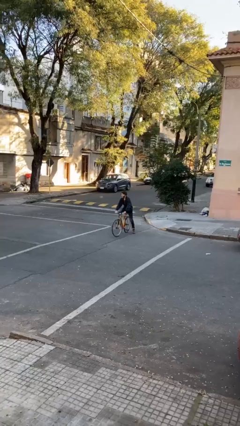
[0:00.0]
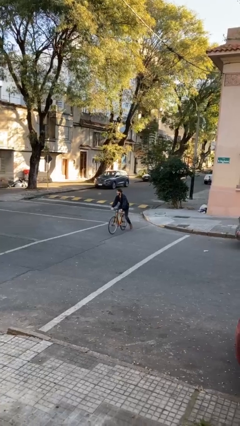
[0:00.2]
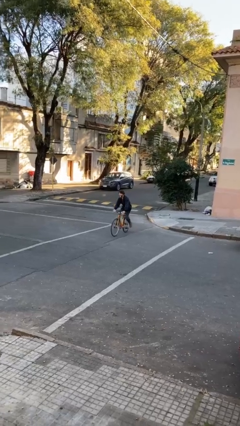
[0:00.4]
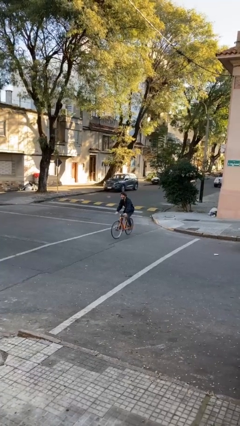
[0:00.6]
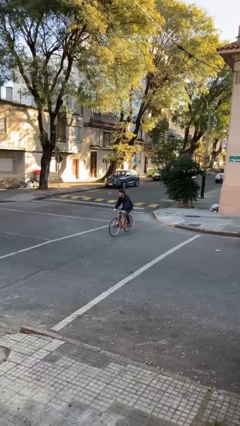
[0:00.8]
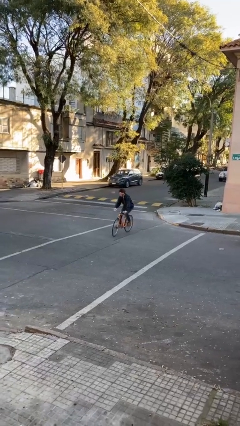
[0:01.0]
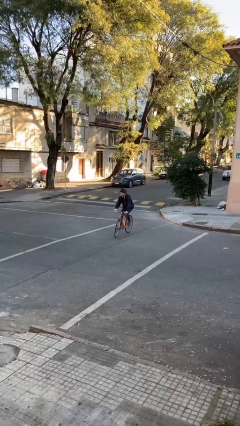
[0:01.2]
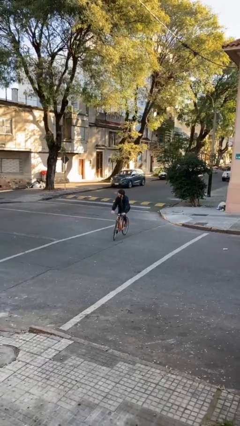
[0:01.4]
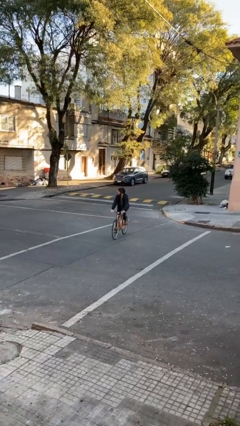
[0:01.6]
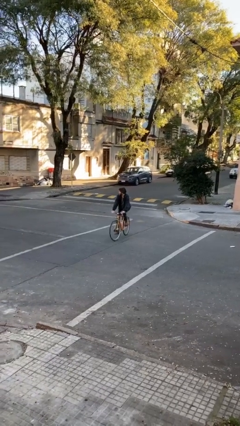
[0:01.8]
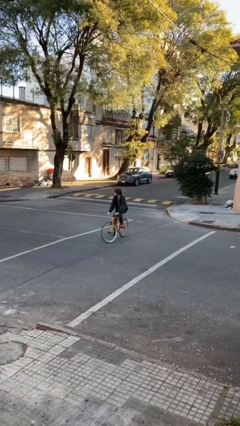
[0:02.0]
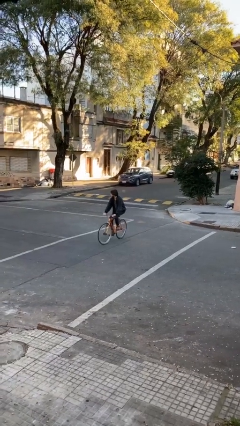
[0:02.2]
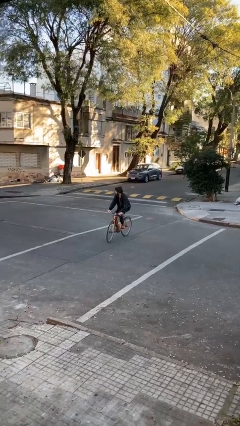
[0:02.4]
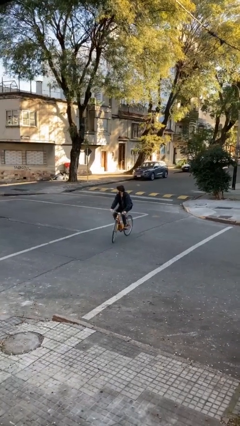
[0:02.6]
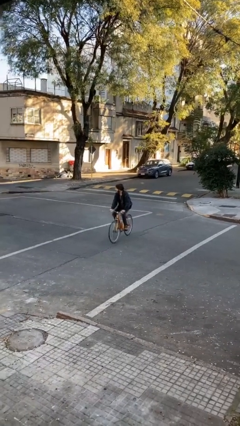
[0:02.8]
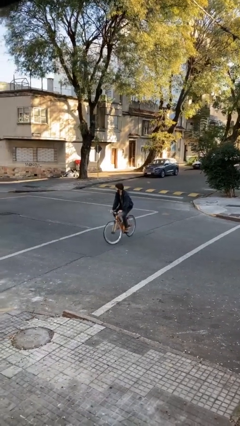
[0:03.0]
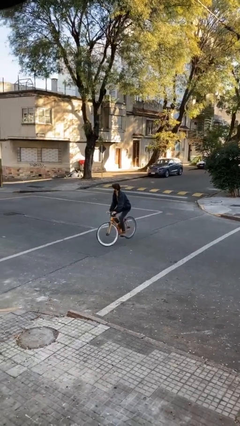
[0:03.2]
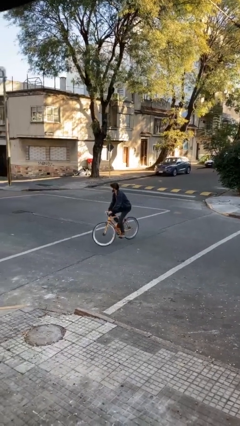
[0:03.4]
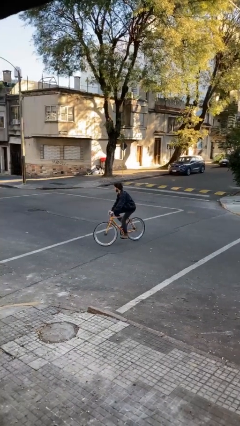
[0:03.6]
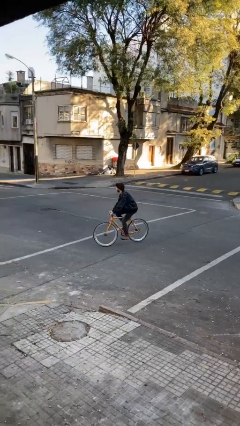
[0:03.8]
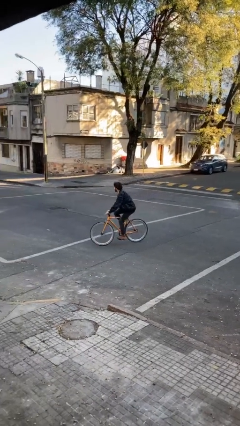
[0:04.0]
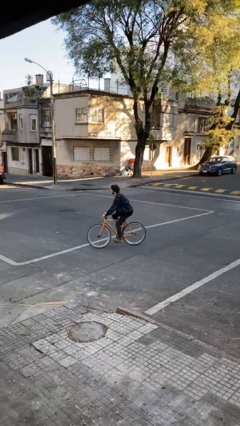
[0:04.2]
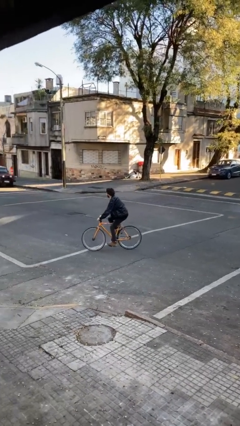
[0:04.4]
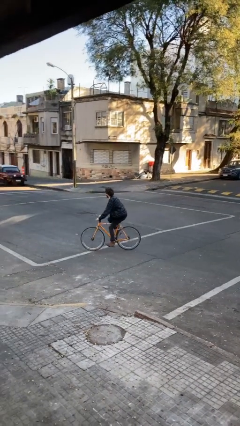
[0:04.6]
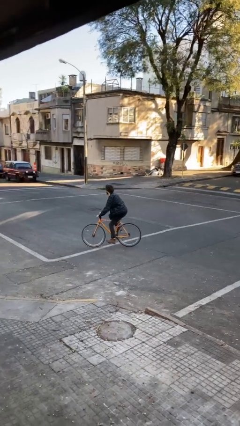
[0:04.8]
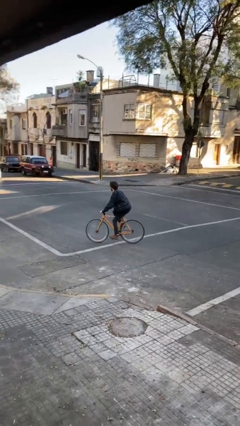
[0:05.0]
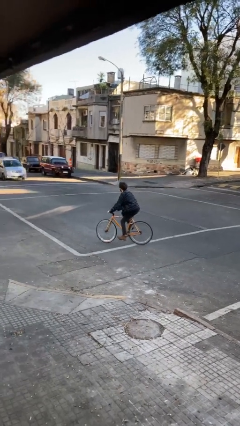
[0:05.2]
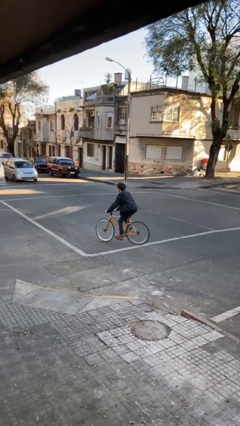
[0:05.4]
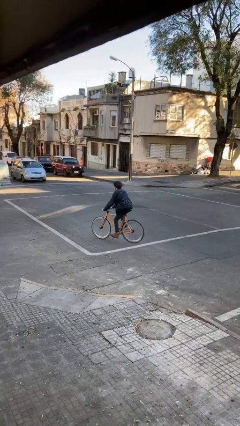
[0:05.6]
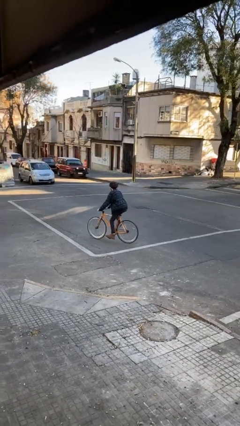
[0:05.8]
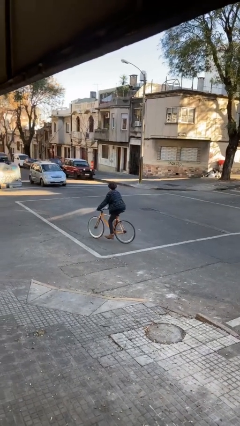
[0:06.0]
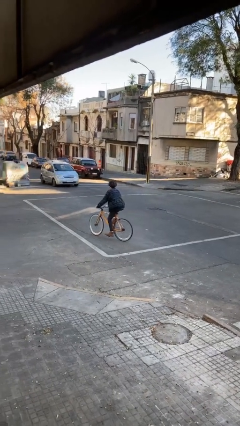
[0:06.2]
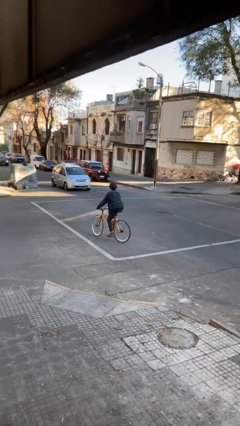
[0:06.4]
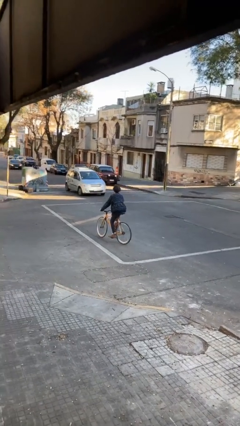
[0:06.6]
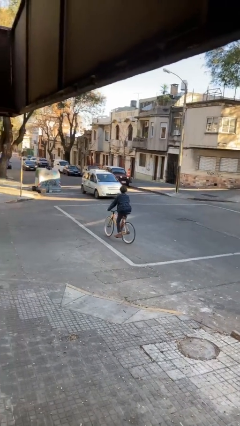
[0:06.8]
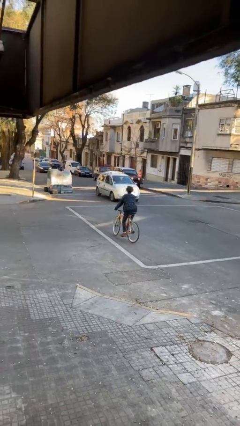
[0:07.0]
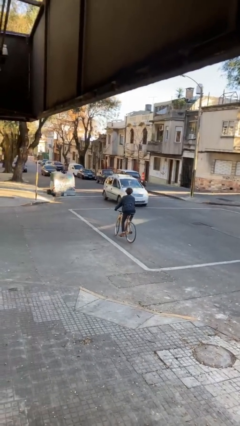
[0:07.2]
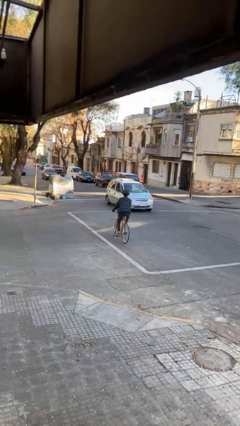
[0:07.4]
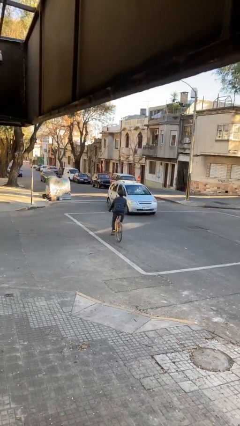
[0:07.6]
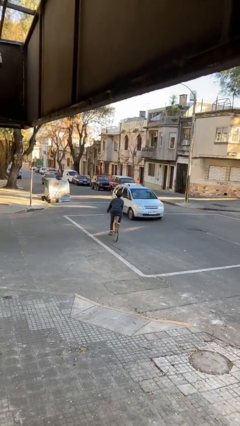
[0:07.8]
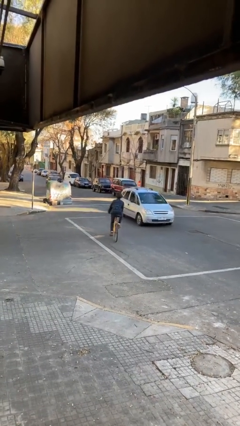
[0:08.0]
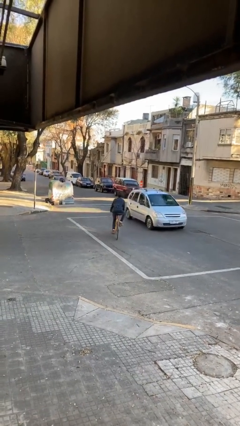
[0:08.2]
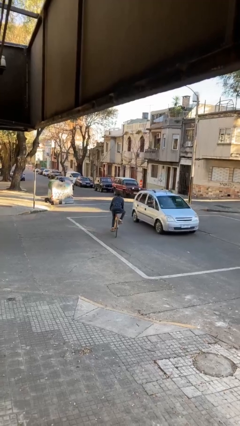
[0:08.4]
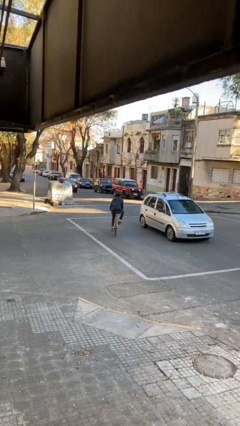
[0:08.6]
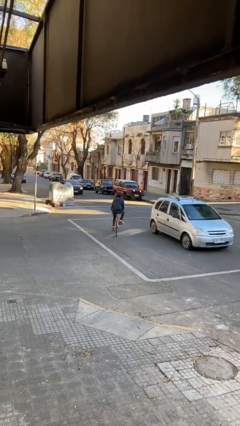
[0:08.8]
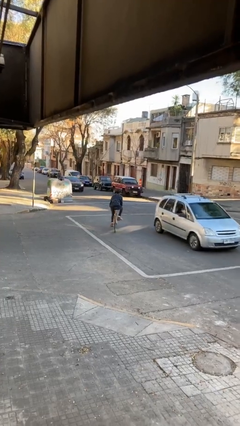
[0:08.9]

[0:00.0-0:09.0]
person rides bicycle

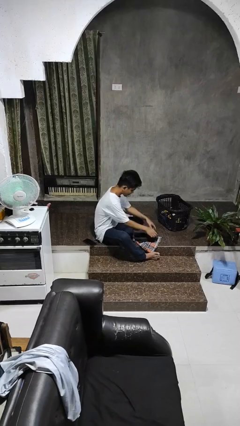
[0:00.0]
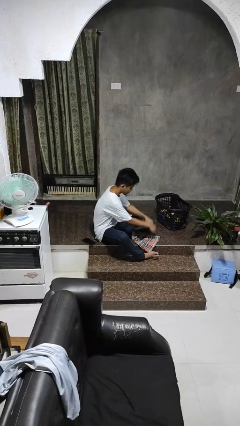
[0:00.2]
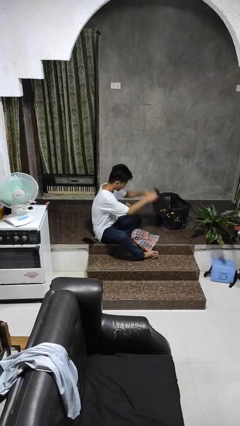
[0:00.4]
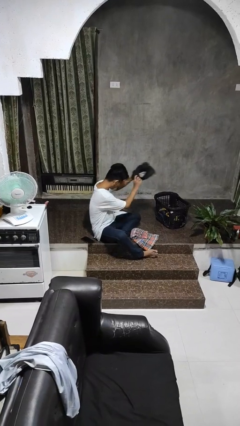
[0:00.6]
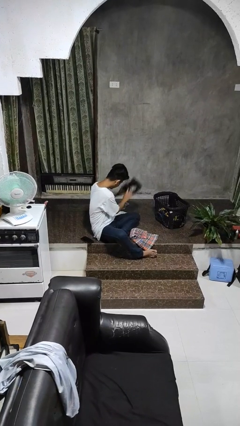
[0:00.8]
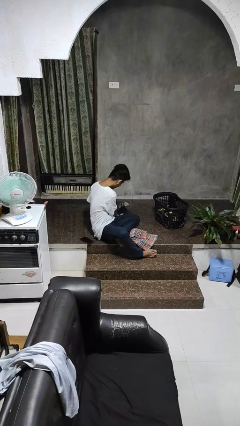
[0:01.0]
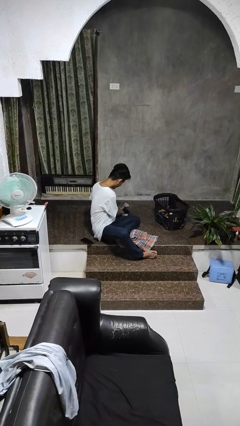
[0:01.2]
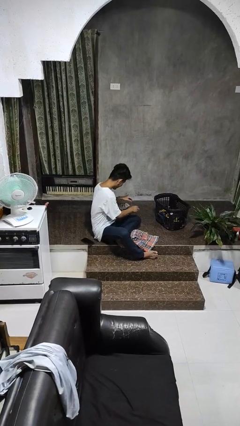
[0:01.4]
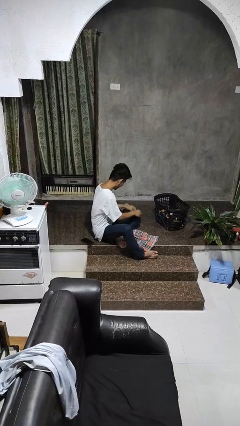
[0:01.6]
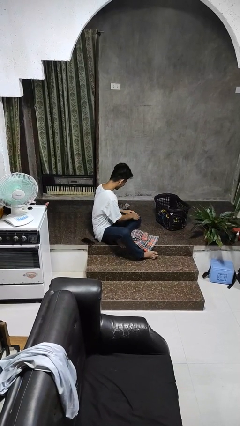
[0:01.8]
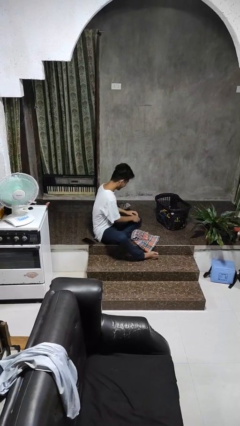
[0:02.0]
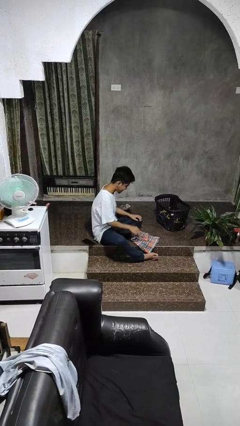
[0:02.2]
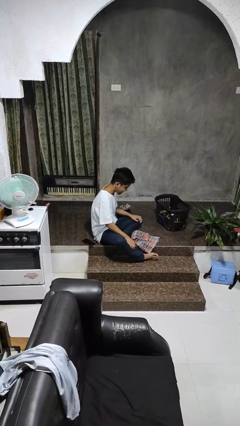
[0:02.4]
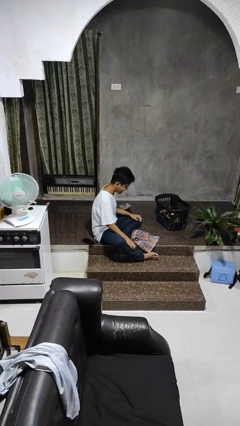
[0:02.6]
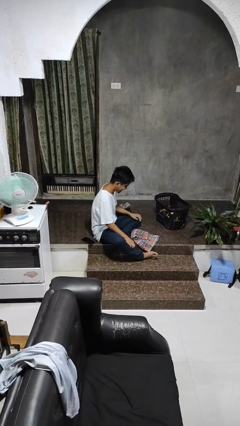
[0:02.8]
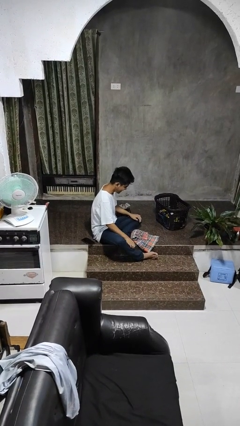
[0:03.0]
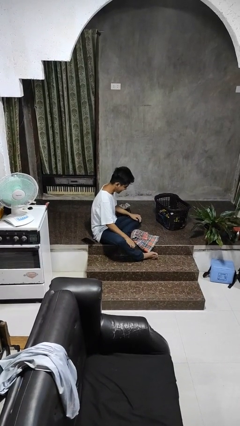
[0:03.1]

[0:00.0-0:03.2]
person folds pants

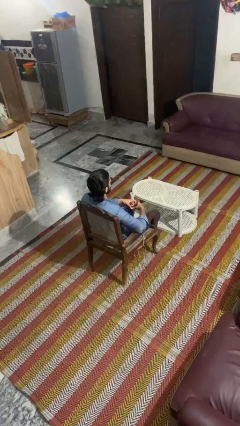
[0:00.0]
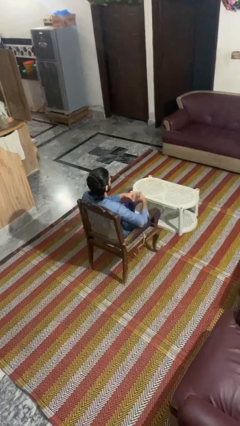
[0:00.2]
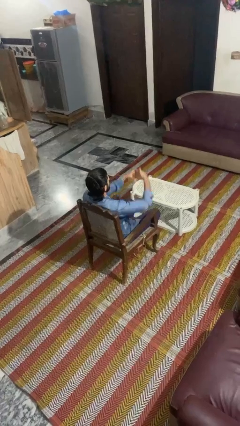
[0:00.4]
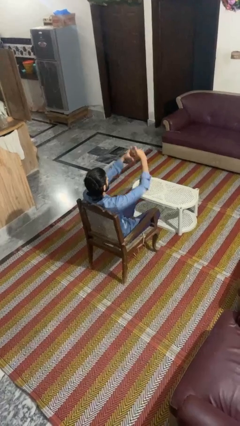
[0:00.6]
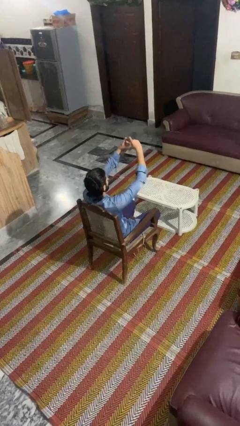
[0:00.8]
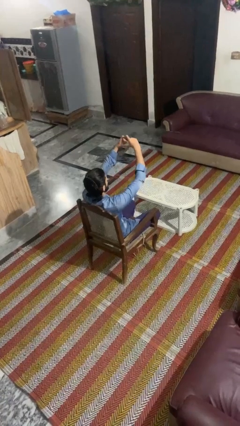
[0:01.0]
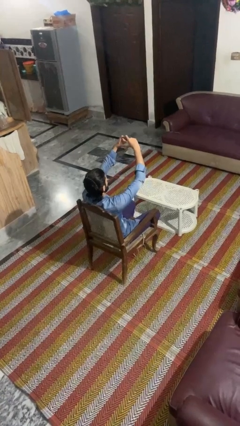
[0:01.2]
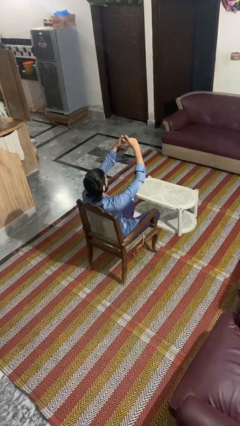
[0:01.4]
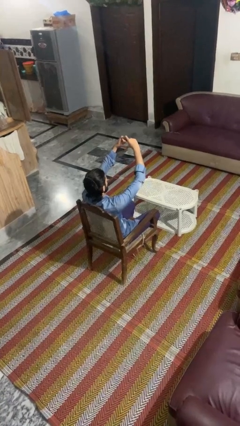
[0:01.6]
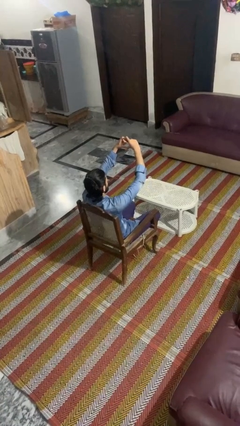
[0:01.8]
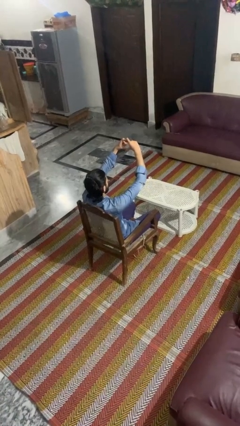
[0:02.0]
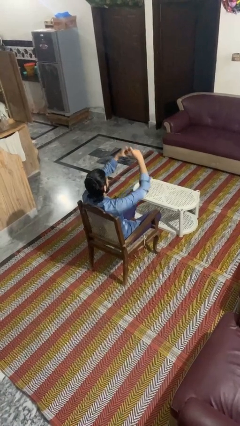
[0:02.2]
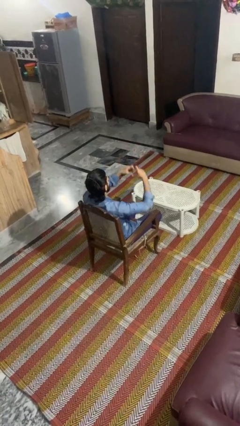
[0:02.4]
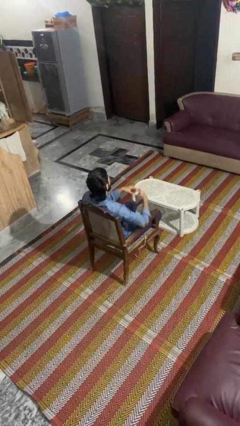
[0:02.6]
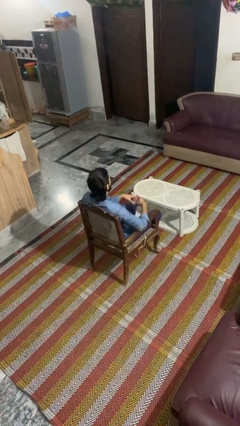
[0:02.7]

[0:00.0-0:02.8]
person gestures heart

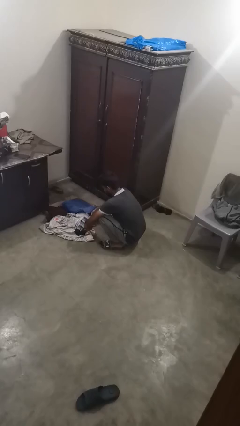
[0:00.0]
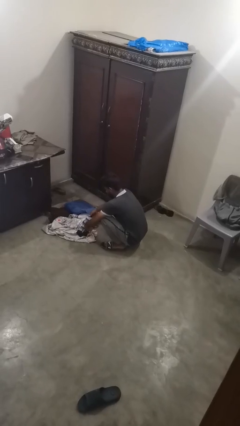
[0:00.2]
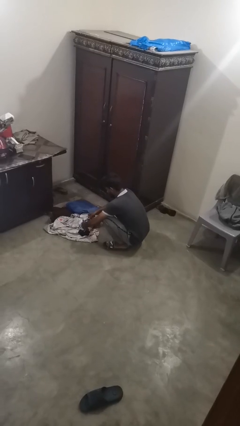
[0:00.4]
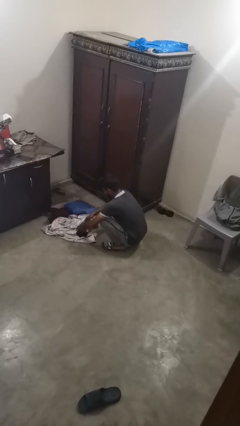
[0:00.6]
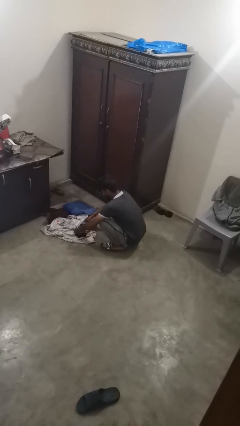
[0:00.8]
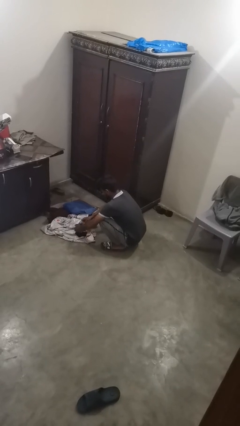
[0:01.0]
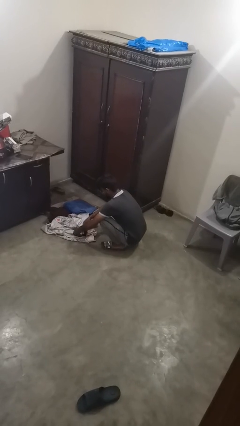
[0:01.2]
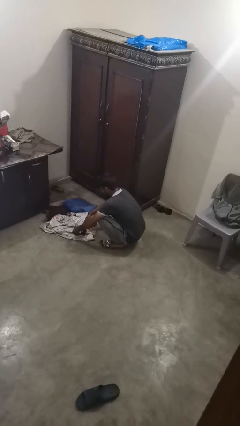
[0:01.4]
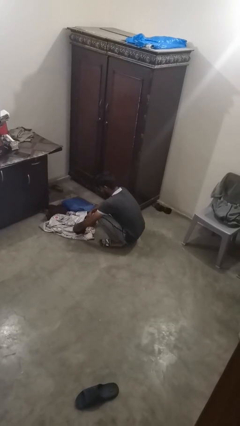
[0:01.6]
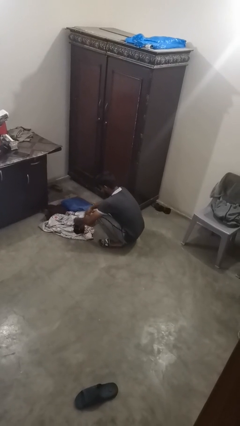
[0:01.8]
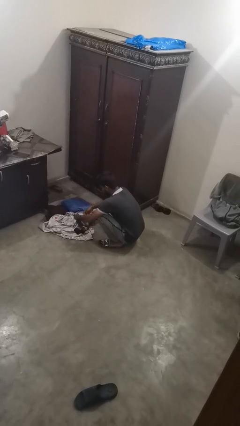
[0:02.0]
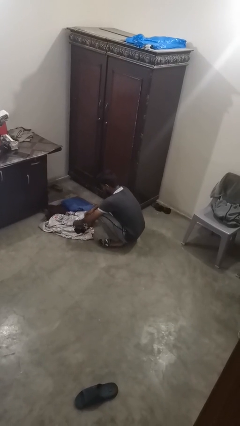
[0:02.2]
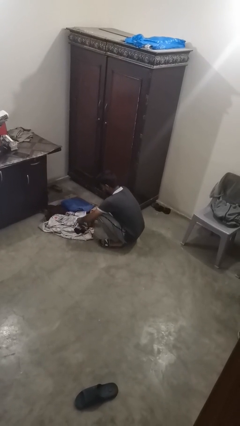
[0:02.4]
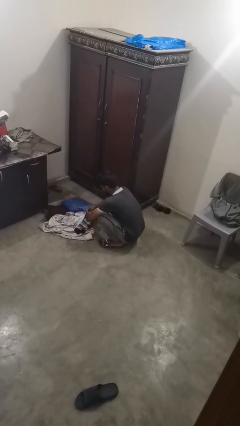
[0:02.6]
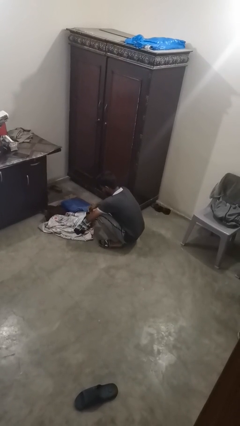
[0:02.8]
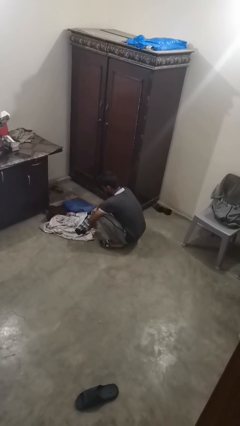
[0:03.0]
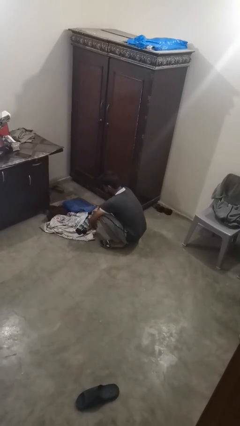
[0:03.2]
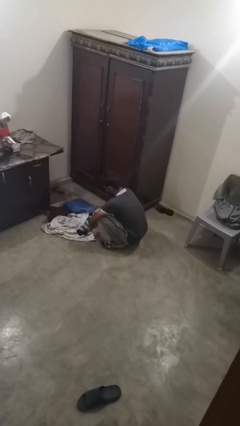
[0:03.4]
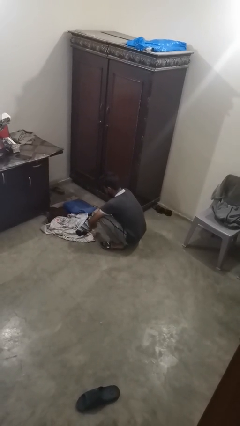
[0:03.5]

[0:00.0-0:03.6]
person folds socks
